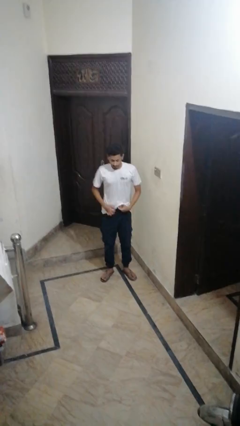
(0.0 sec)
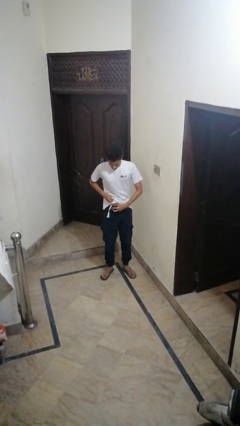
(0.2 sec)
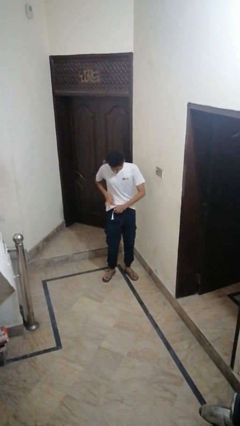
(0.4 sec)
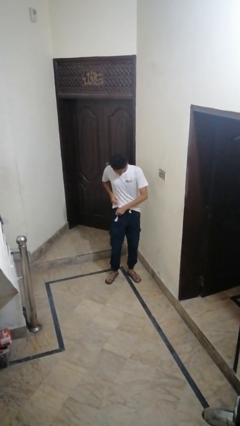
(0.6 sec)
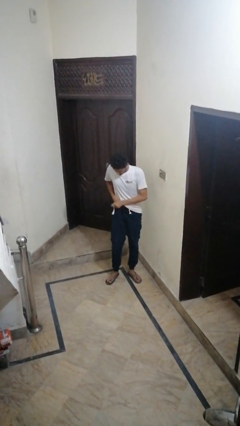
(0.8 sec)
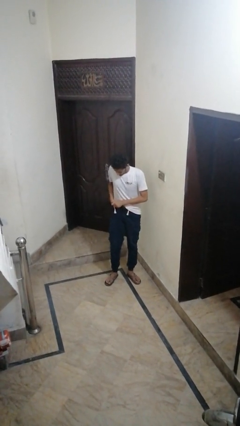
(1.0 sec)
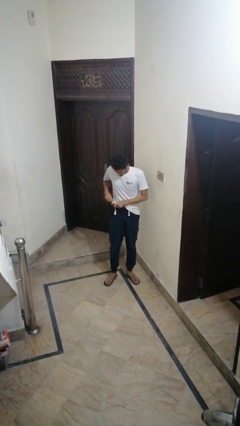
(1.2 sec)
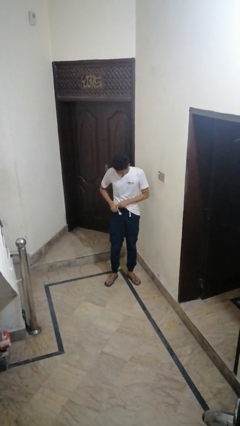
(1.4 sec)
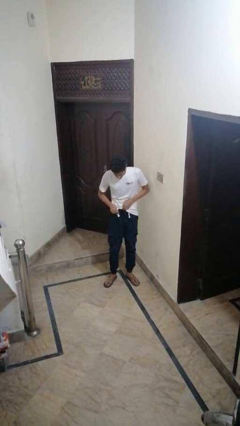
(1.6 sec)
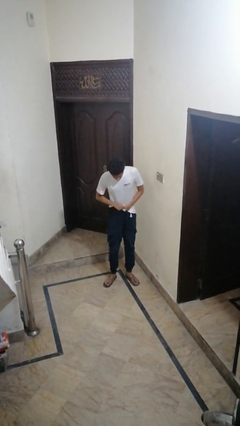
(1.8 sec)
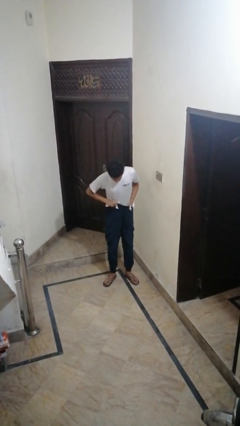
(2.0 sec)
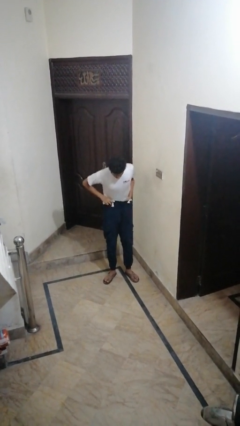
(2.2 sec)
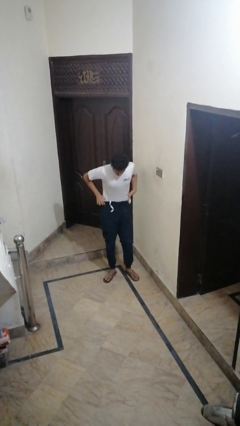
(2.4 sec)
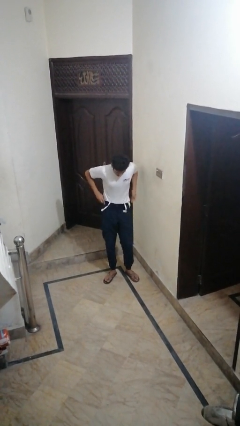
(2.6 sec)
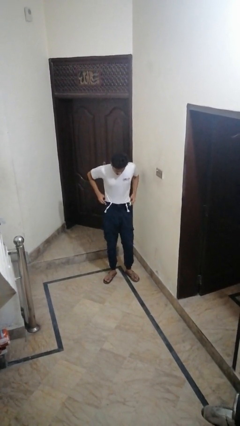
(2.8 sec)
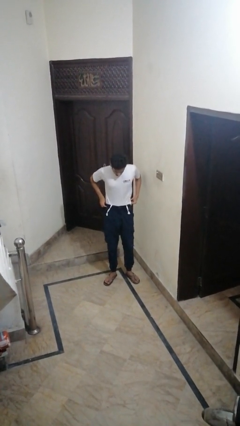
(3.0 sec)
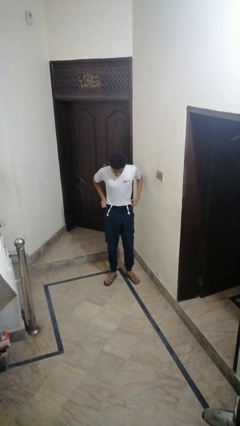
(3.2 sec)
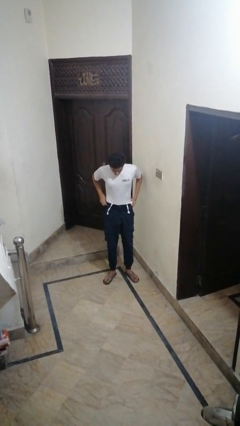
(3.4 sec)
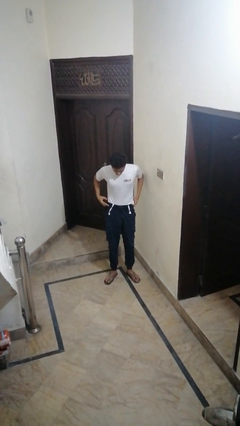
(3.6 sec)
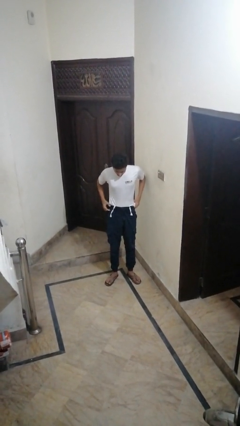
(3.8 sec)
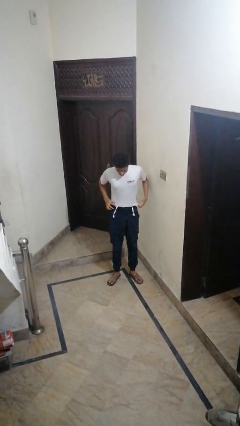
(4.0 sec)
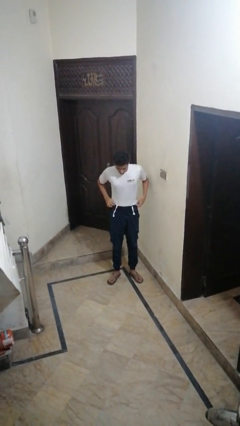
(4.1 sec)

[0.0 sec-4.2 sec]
person tucks in shirt

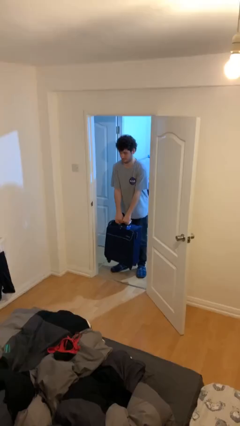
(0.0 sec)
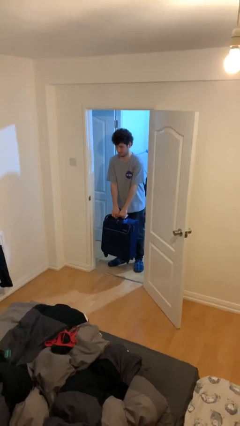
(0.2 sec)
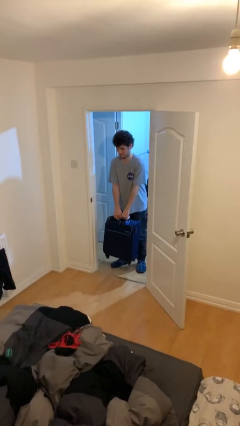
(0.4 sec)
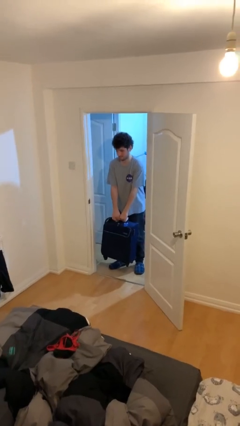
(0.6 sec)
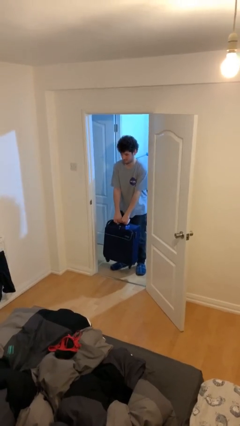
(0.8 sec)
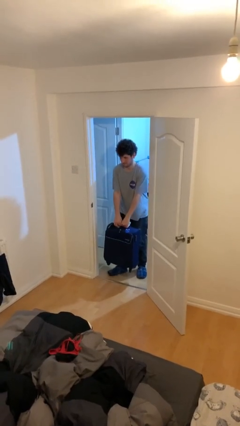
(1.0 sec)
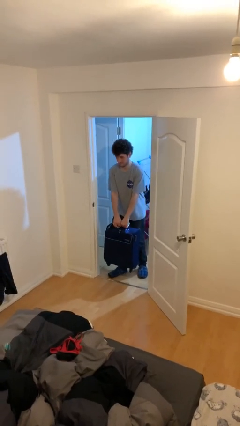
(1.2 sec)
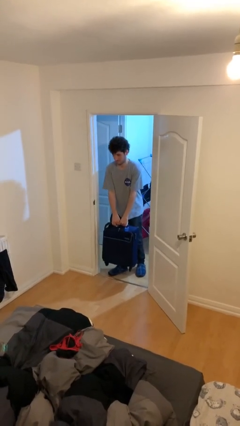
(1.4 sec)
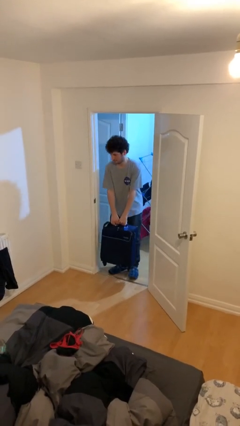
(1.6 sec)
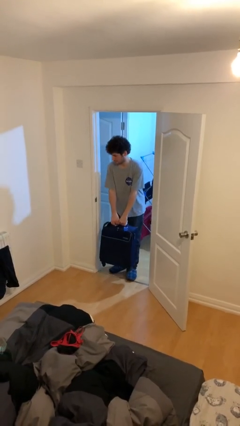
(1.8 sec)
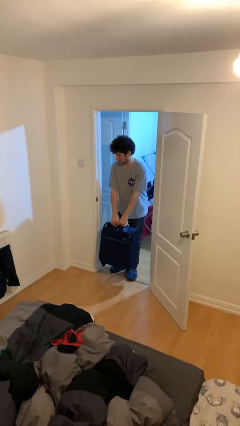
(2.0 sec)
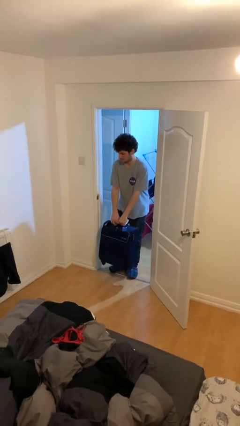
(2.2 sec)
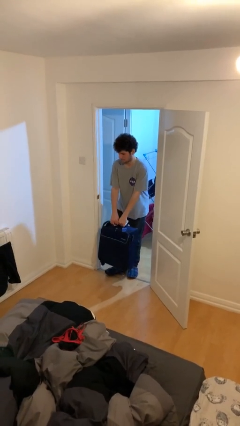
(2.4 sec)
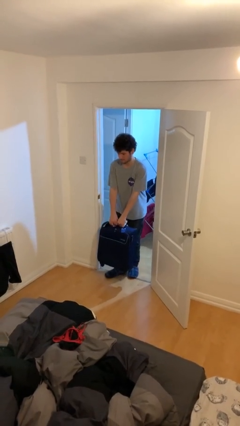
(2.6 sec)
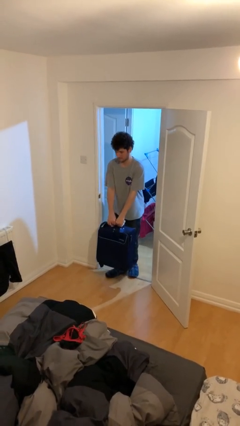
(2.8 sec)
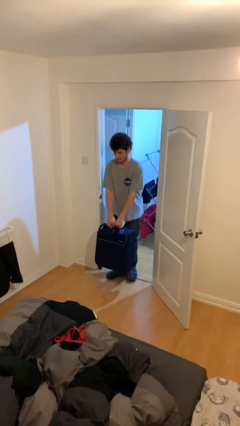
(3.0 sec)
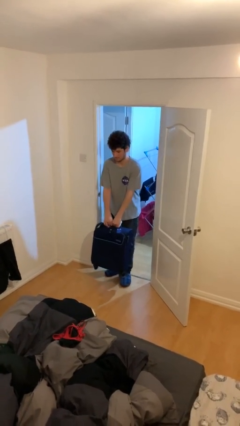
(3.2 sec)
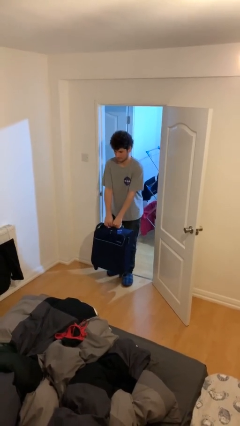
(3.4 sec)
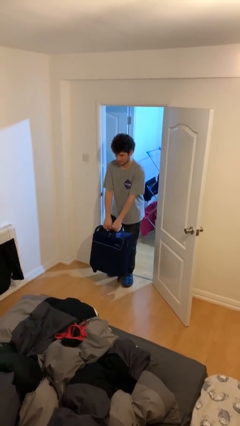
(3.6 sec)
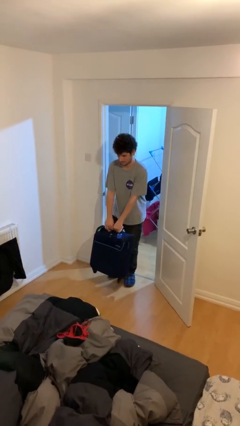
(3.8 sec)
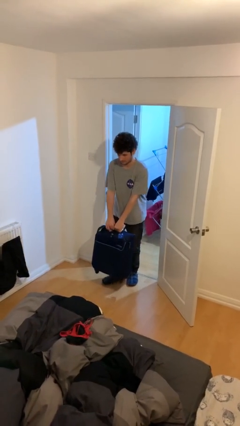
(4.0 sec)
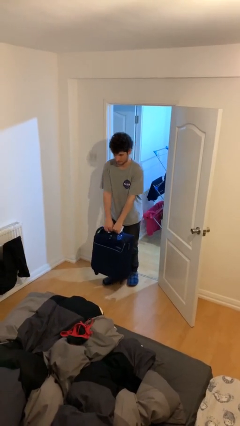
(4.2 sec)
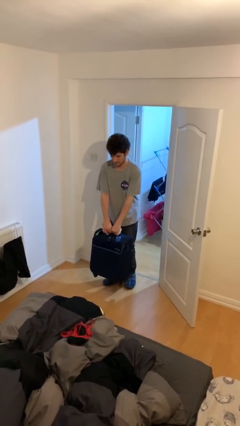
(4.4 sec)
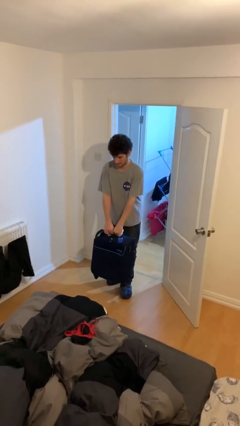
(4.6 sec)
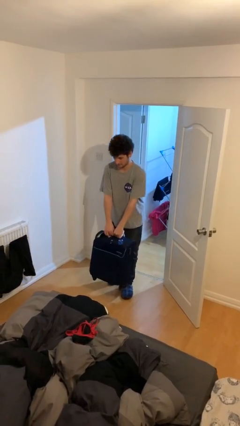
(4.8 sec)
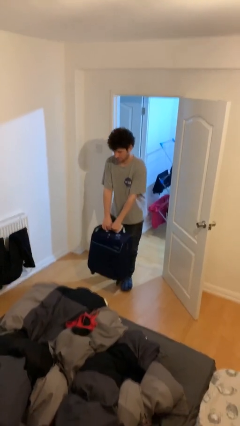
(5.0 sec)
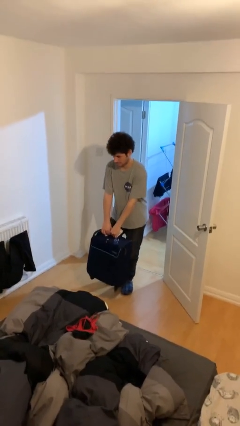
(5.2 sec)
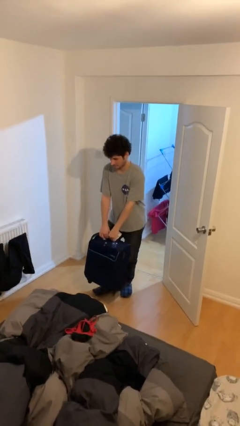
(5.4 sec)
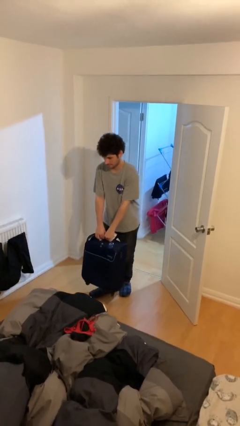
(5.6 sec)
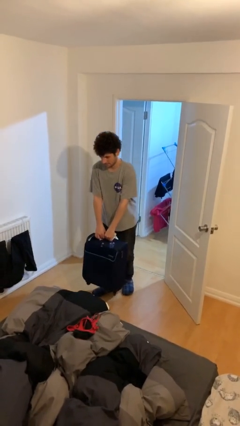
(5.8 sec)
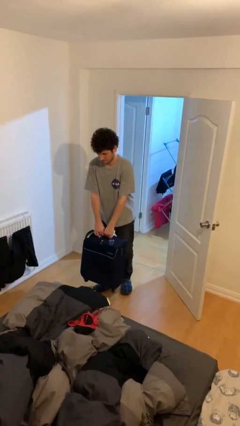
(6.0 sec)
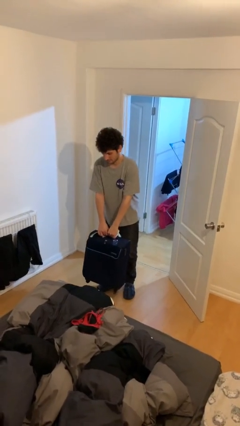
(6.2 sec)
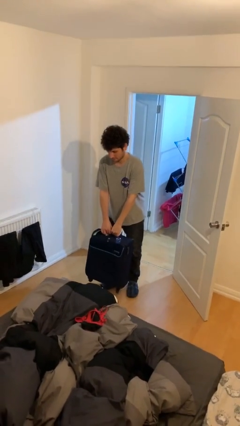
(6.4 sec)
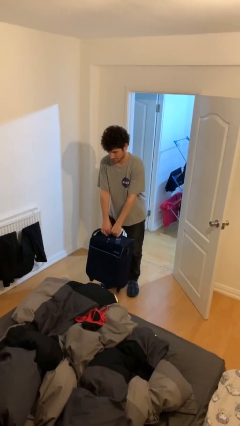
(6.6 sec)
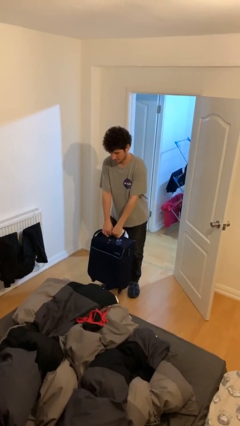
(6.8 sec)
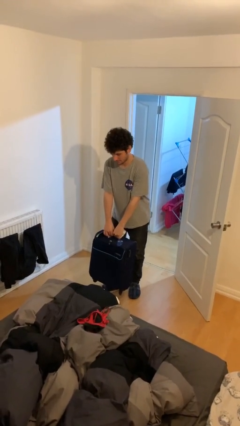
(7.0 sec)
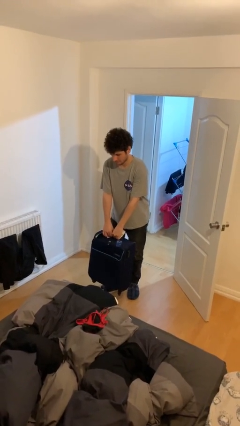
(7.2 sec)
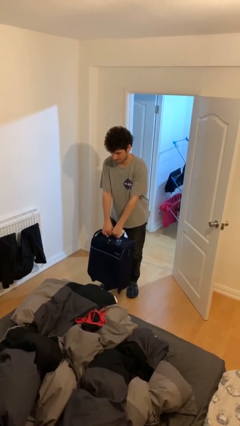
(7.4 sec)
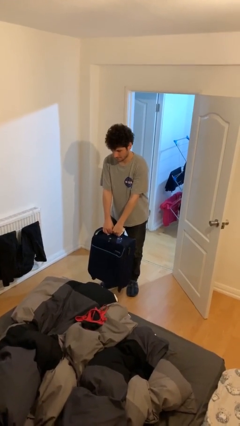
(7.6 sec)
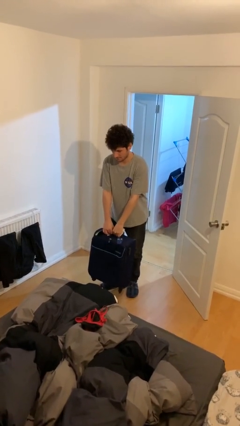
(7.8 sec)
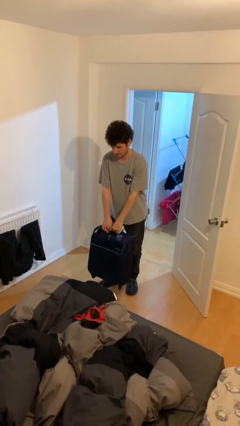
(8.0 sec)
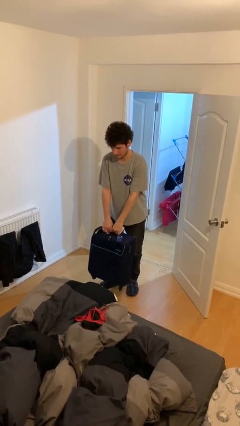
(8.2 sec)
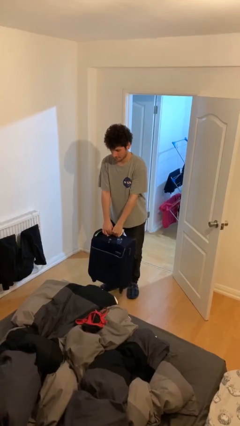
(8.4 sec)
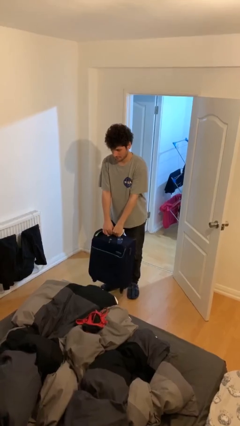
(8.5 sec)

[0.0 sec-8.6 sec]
person carries heavy object

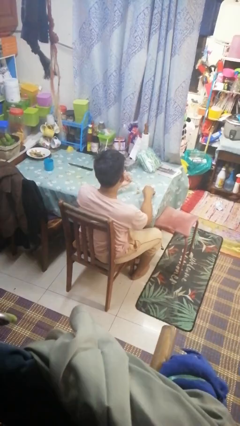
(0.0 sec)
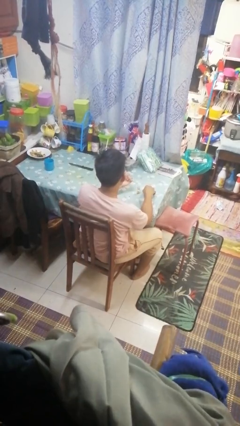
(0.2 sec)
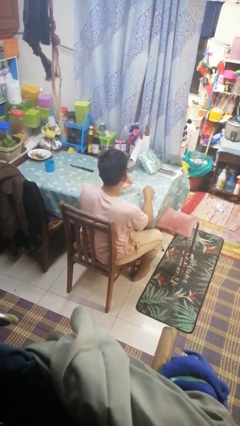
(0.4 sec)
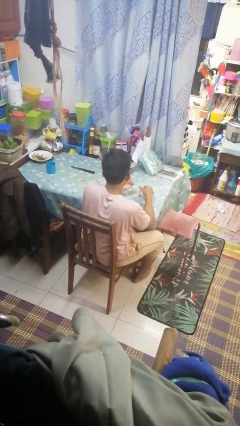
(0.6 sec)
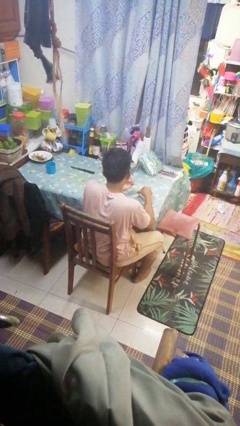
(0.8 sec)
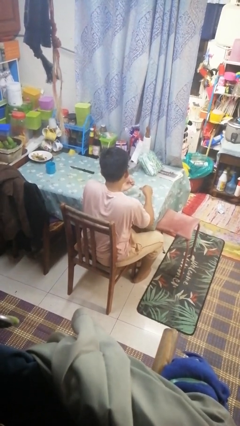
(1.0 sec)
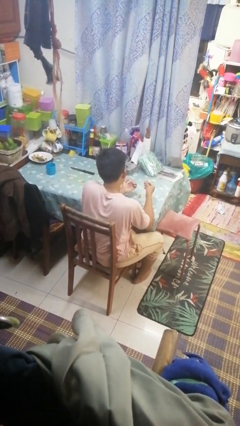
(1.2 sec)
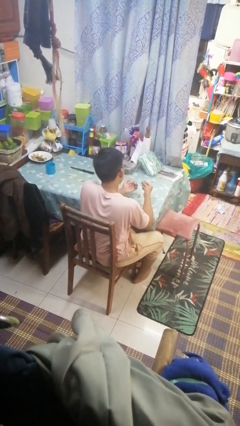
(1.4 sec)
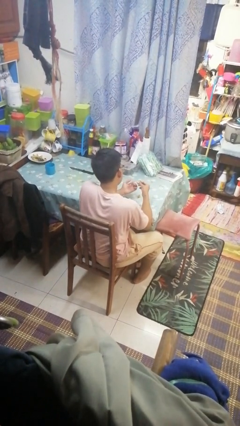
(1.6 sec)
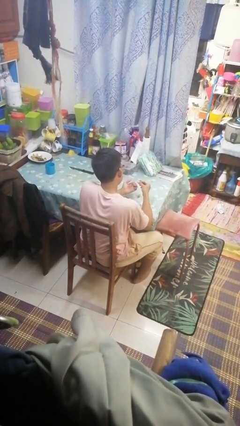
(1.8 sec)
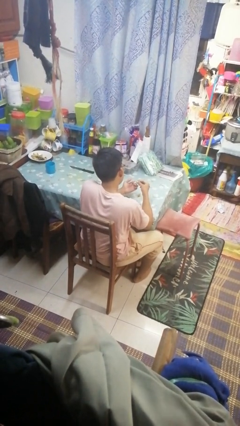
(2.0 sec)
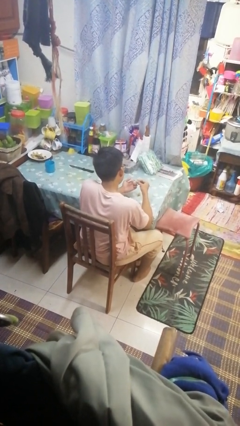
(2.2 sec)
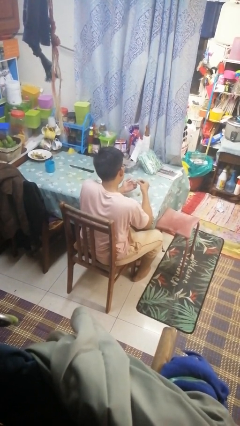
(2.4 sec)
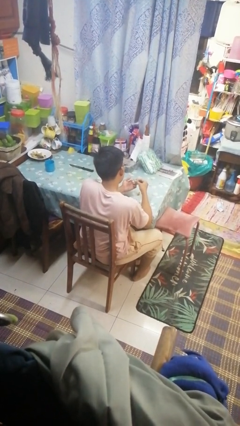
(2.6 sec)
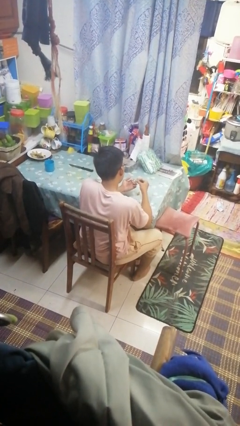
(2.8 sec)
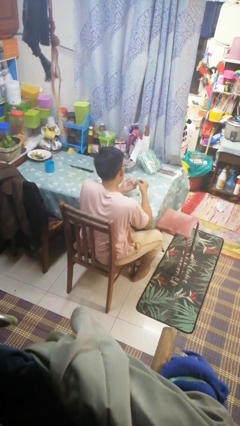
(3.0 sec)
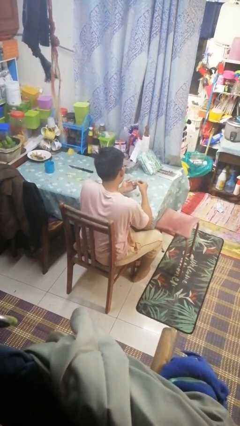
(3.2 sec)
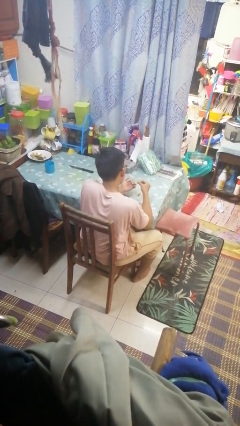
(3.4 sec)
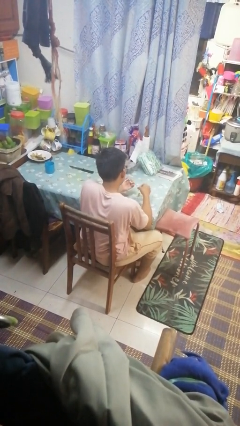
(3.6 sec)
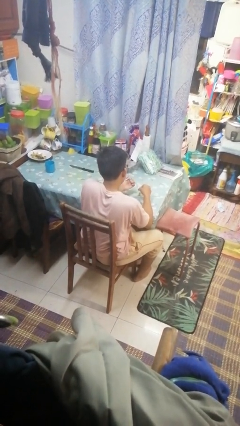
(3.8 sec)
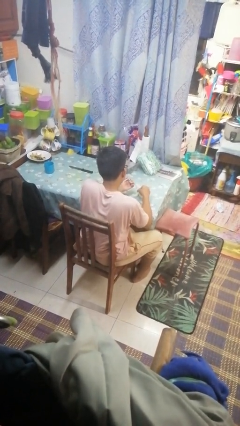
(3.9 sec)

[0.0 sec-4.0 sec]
person paints fingernails

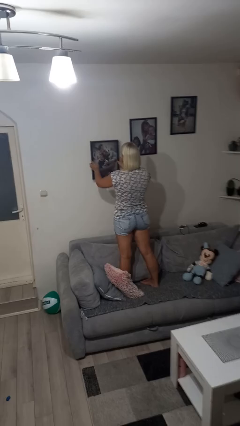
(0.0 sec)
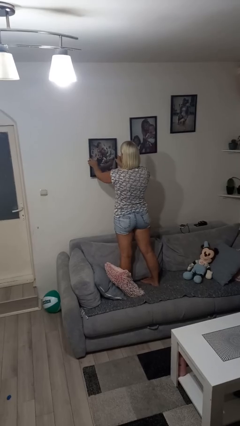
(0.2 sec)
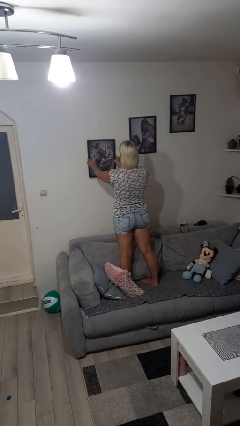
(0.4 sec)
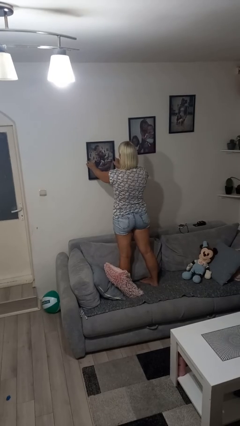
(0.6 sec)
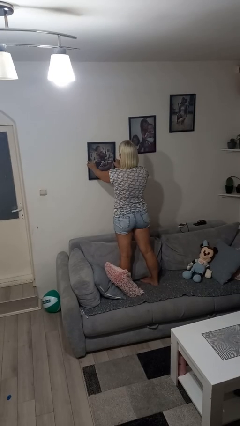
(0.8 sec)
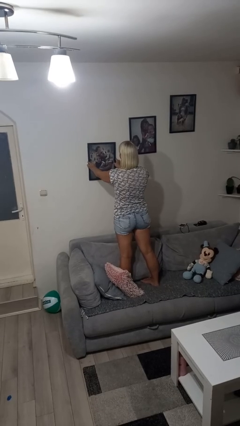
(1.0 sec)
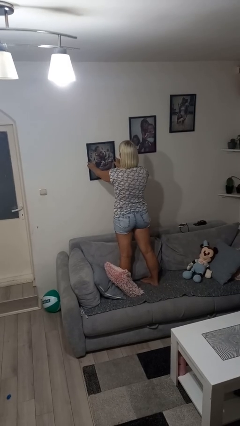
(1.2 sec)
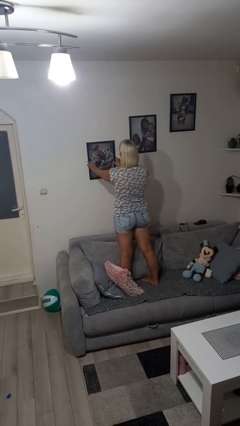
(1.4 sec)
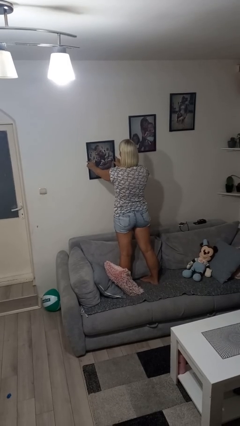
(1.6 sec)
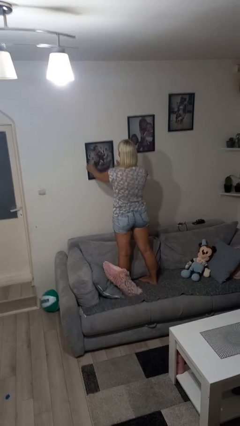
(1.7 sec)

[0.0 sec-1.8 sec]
person puts up picture frame
